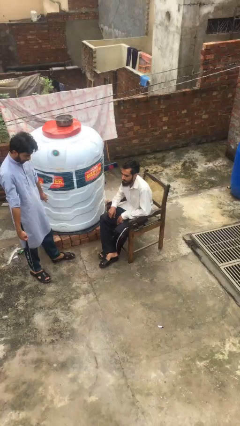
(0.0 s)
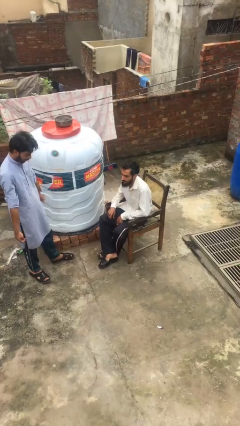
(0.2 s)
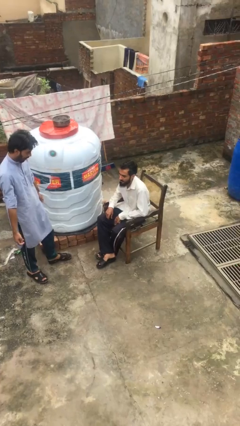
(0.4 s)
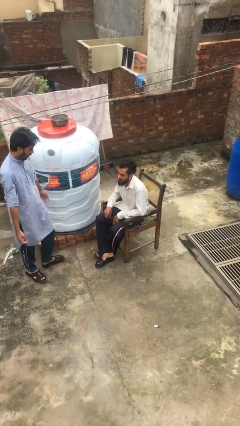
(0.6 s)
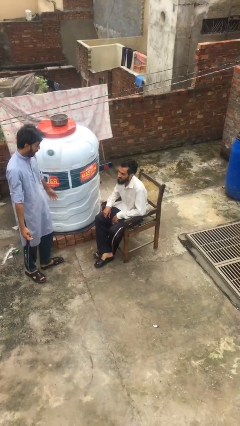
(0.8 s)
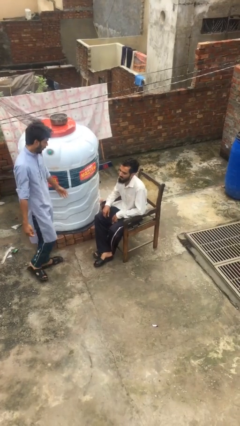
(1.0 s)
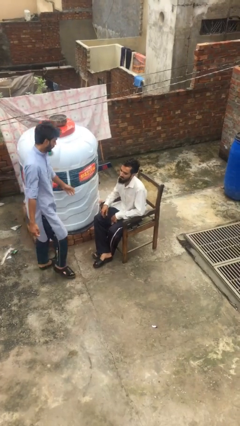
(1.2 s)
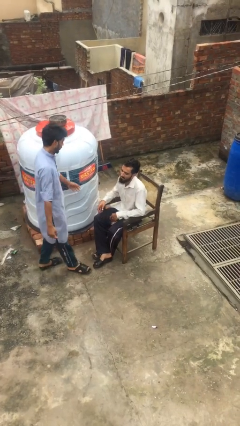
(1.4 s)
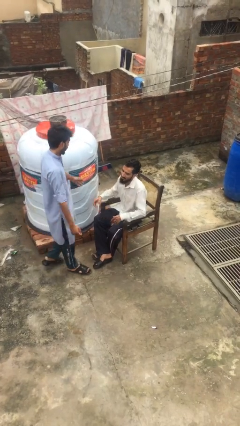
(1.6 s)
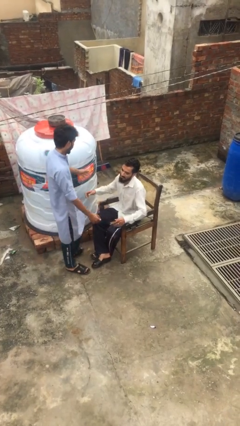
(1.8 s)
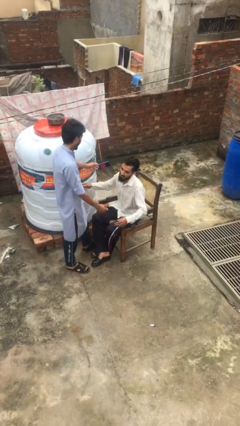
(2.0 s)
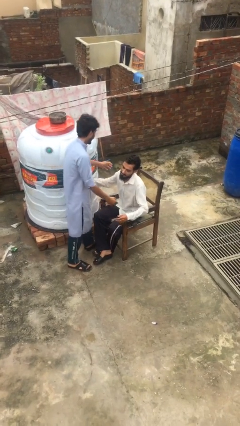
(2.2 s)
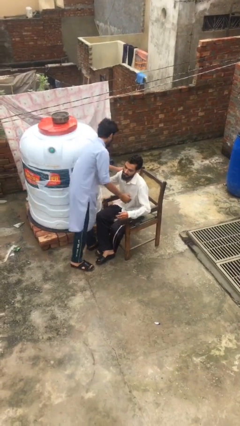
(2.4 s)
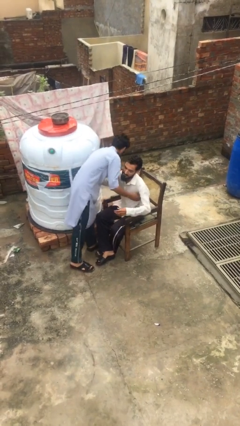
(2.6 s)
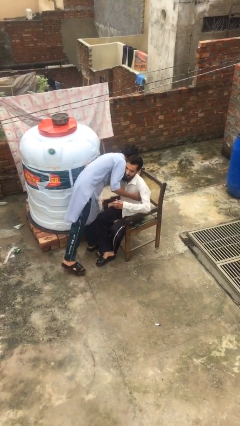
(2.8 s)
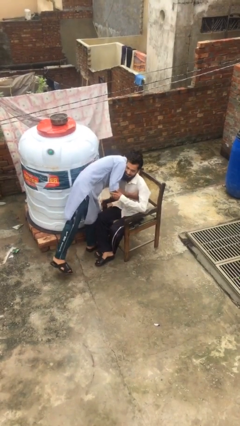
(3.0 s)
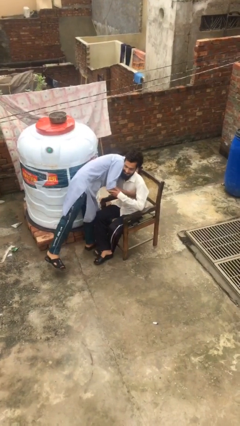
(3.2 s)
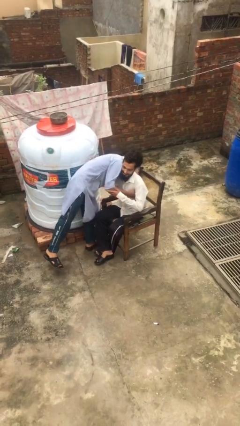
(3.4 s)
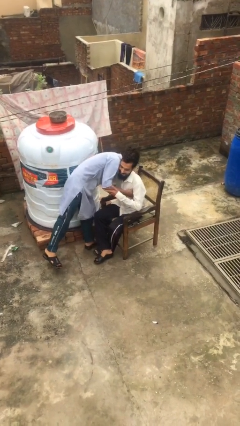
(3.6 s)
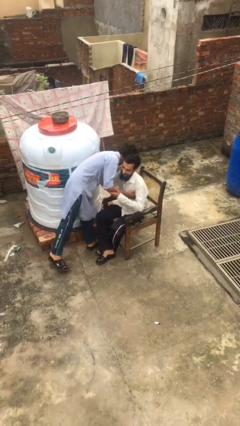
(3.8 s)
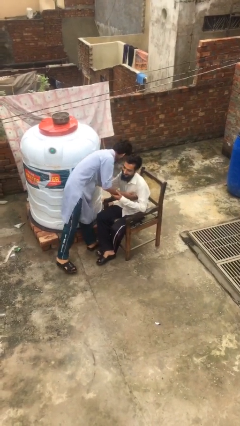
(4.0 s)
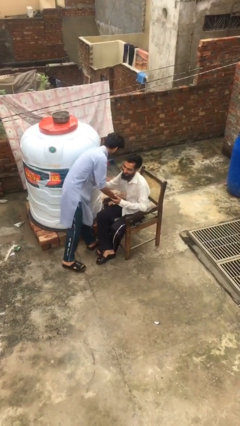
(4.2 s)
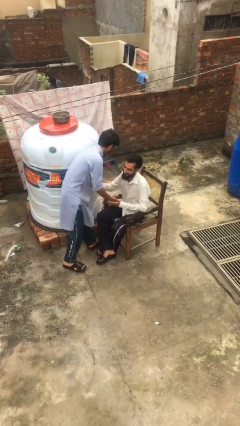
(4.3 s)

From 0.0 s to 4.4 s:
person embraces person

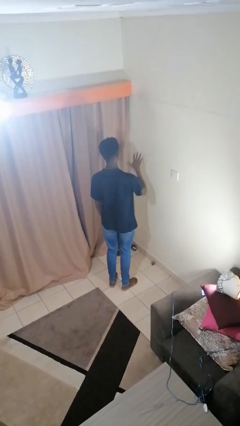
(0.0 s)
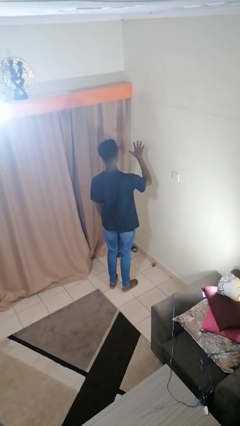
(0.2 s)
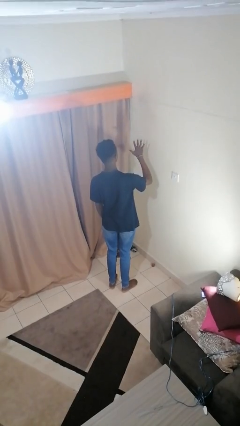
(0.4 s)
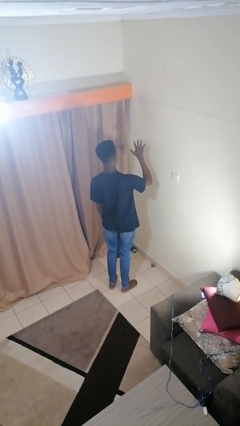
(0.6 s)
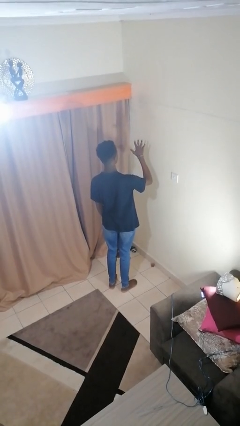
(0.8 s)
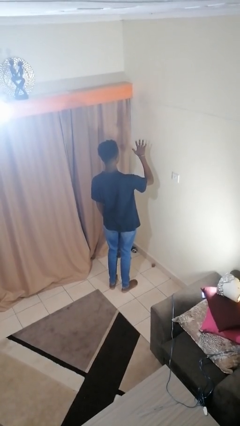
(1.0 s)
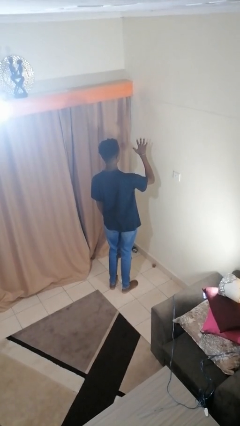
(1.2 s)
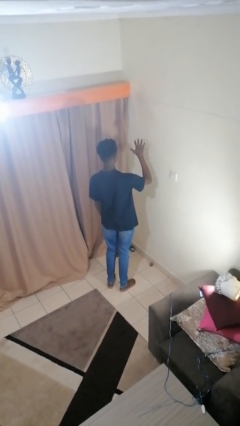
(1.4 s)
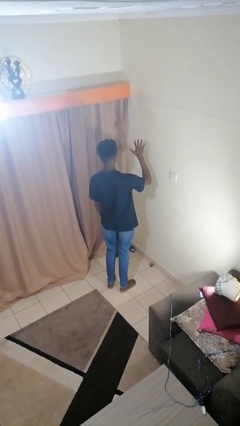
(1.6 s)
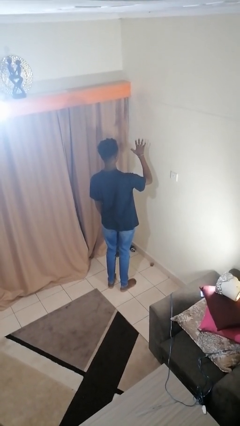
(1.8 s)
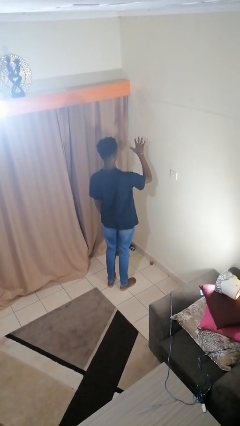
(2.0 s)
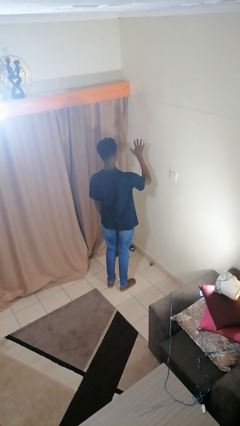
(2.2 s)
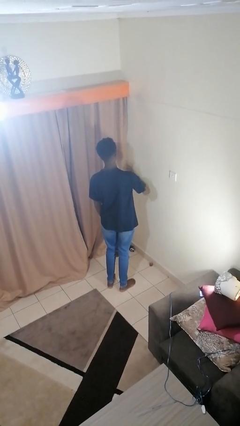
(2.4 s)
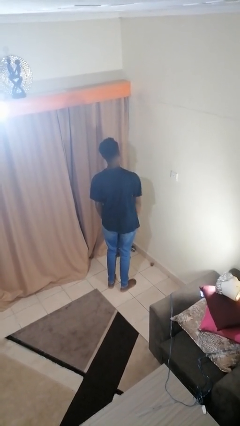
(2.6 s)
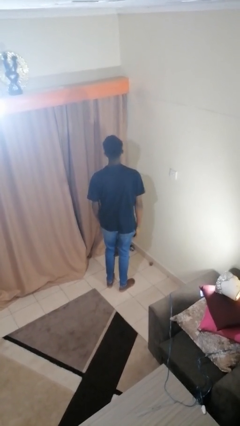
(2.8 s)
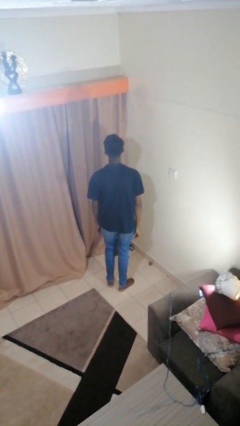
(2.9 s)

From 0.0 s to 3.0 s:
person gestures number five

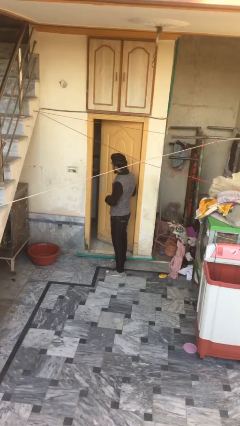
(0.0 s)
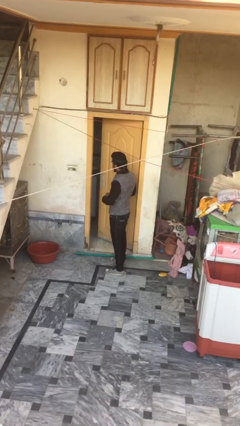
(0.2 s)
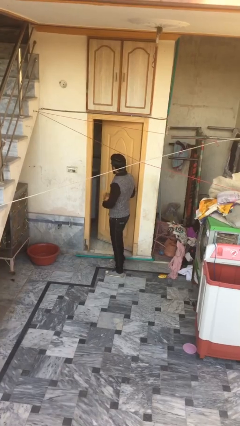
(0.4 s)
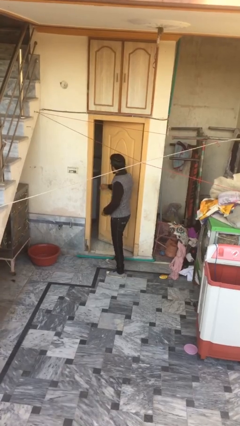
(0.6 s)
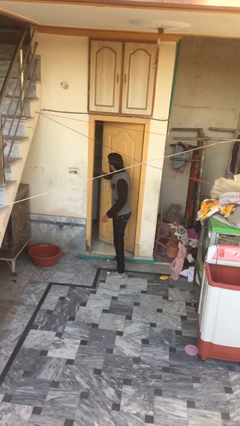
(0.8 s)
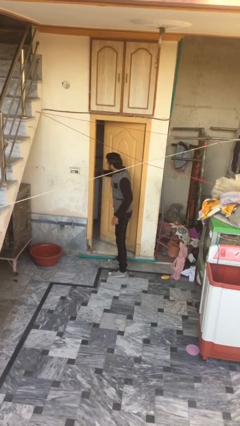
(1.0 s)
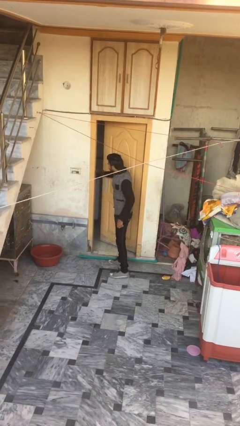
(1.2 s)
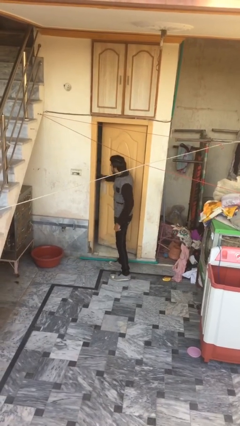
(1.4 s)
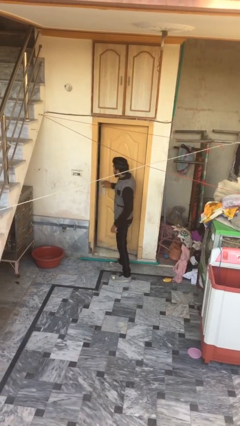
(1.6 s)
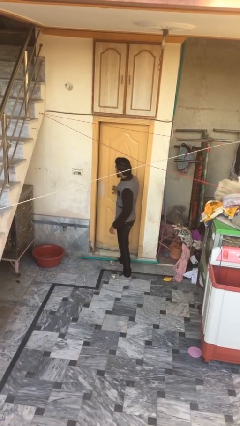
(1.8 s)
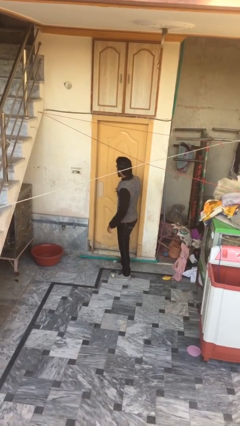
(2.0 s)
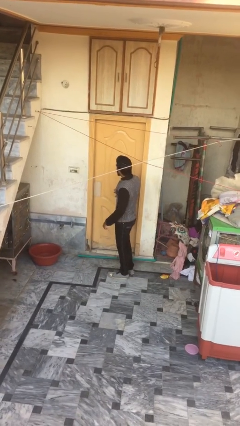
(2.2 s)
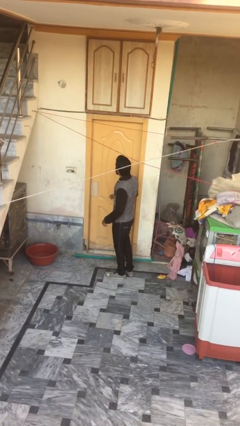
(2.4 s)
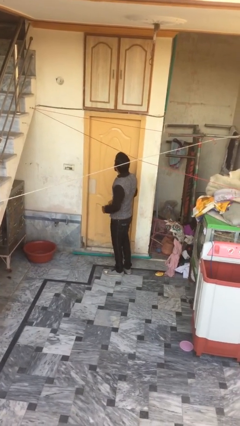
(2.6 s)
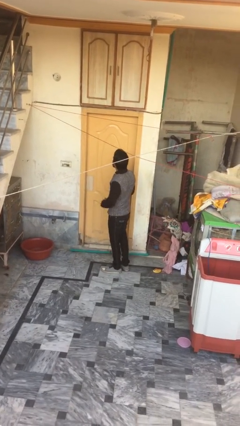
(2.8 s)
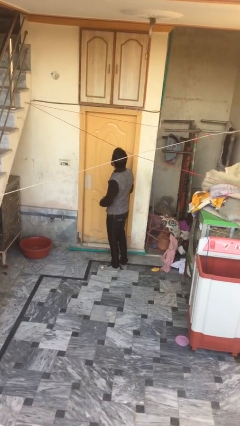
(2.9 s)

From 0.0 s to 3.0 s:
person closes facility door

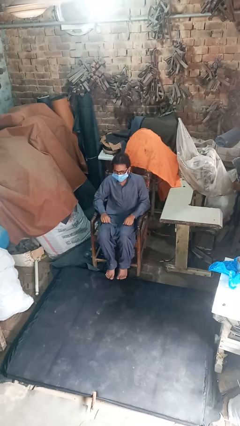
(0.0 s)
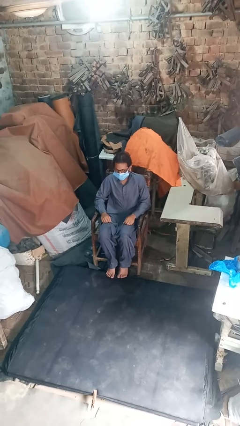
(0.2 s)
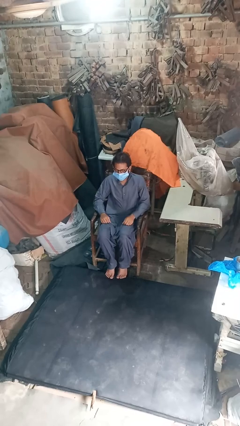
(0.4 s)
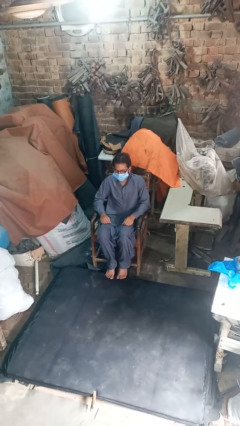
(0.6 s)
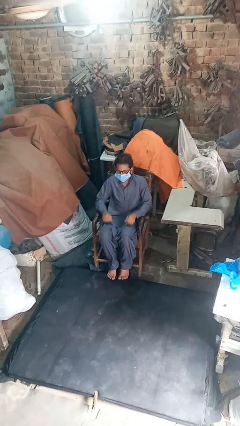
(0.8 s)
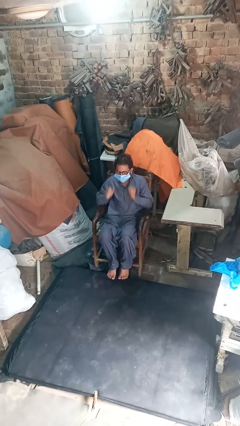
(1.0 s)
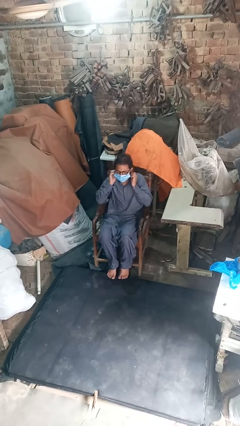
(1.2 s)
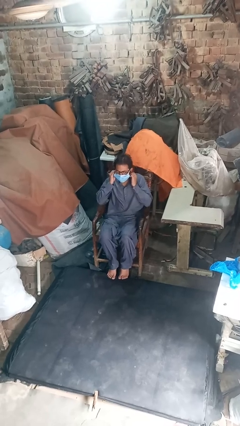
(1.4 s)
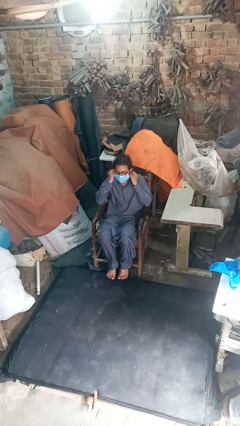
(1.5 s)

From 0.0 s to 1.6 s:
person takes off facemask

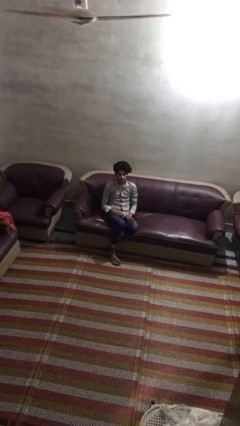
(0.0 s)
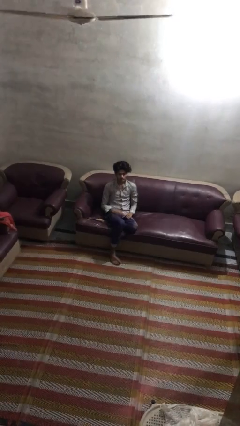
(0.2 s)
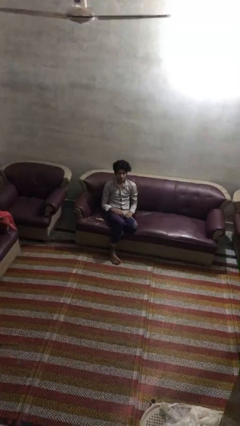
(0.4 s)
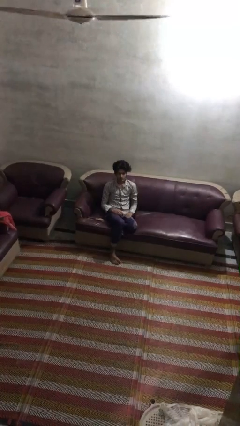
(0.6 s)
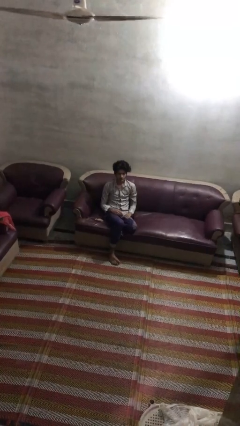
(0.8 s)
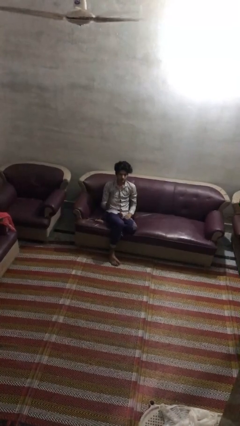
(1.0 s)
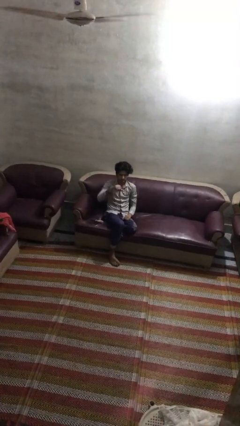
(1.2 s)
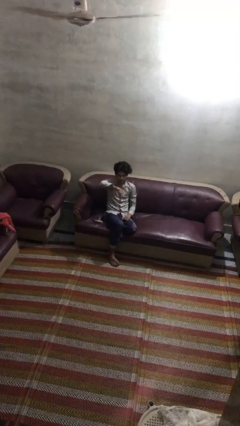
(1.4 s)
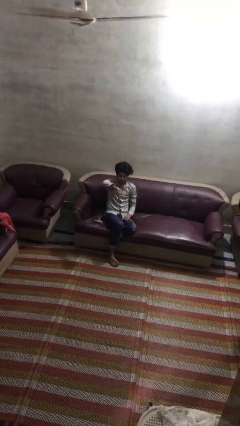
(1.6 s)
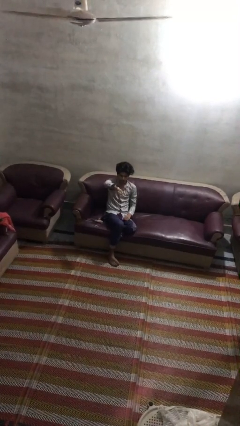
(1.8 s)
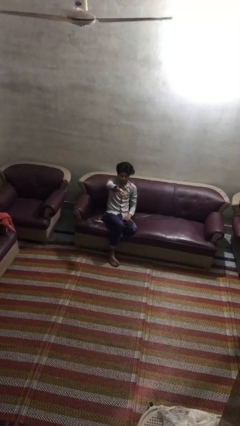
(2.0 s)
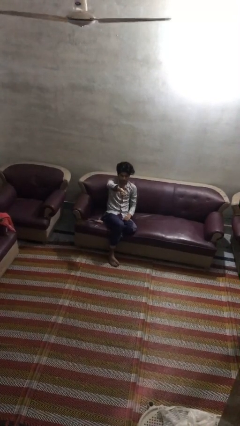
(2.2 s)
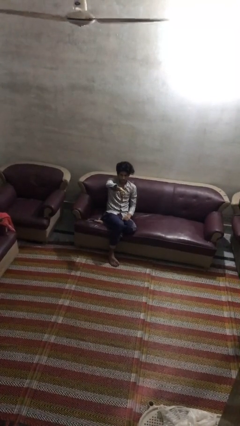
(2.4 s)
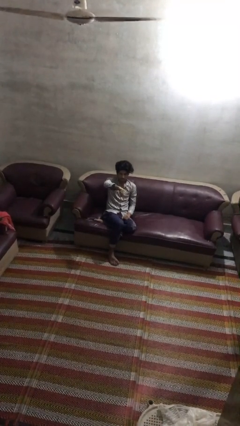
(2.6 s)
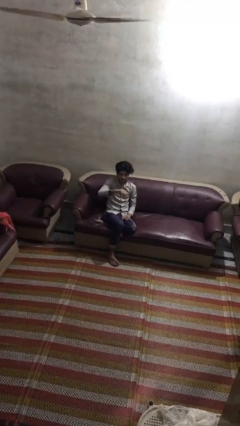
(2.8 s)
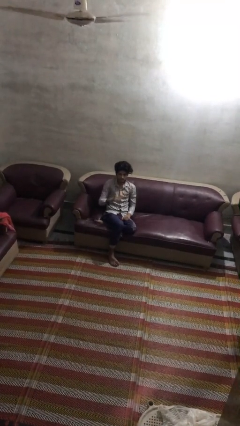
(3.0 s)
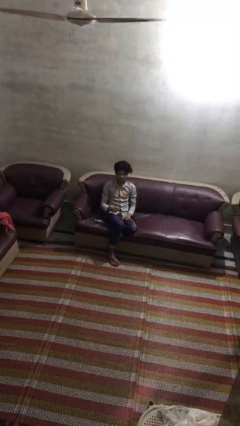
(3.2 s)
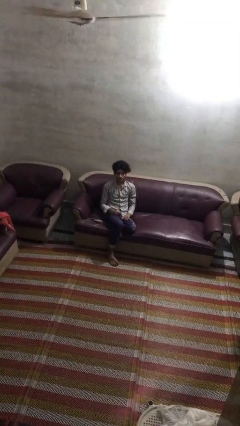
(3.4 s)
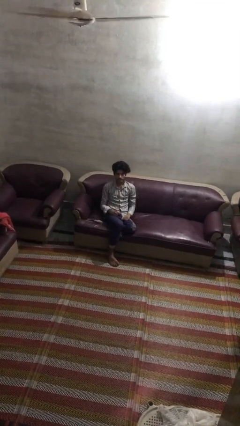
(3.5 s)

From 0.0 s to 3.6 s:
person gestures thumbs down

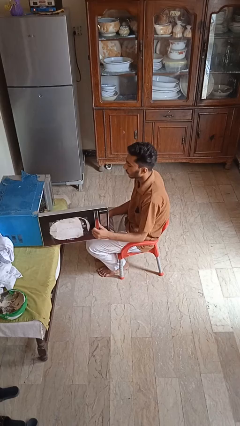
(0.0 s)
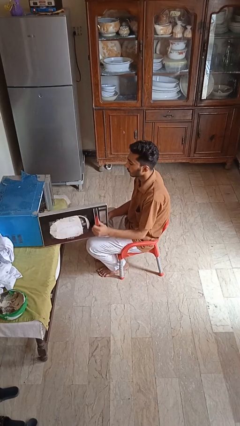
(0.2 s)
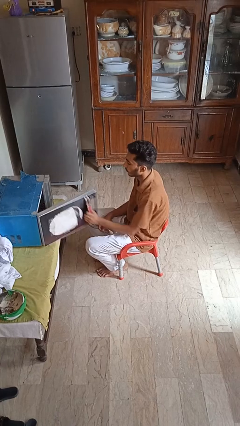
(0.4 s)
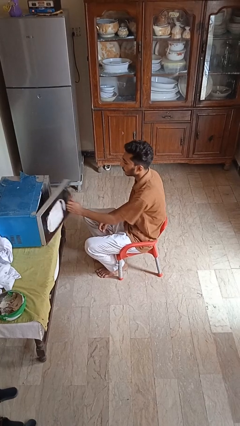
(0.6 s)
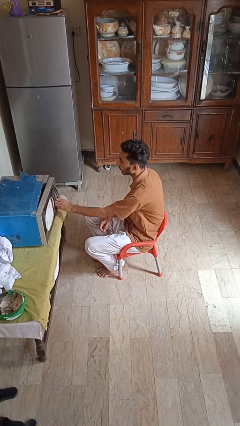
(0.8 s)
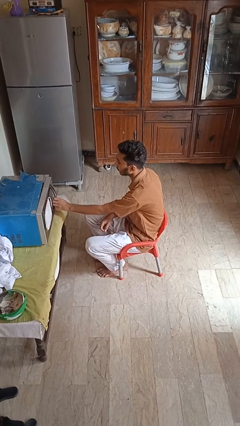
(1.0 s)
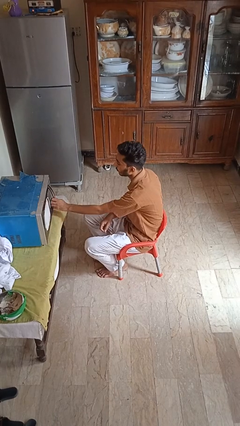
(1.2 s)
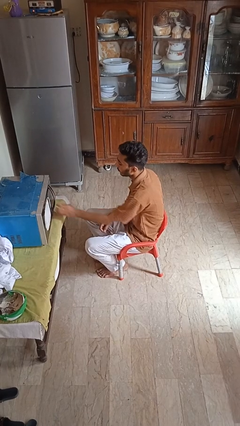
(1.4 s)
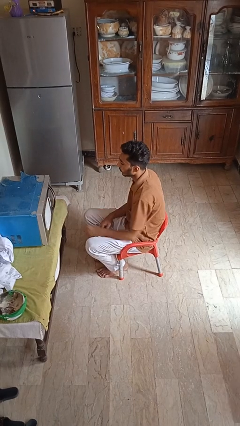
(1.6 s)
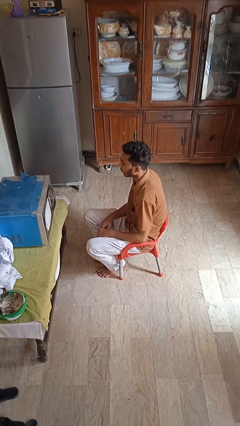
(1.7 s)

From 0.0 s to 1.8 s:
person closes microwave
